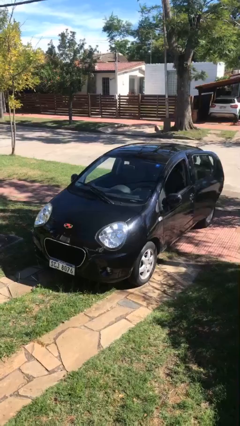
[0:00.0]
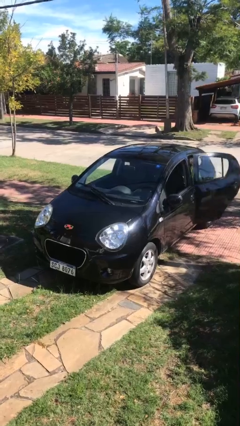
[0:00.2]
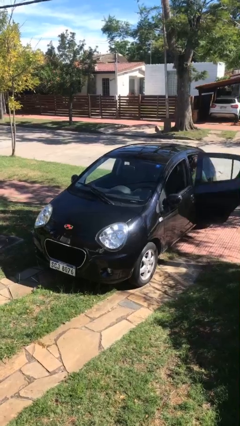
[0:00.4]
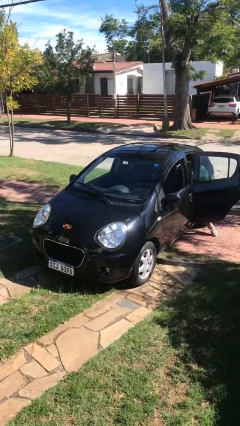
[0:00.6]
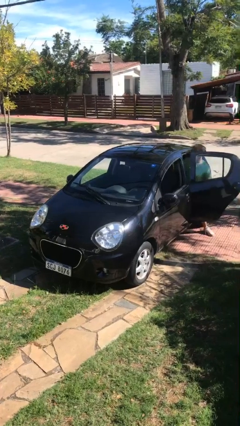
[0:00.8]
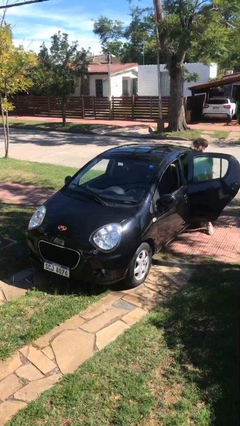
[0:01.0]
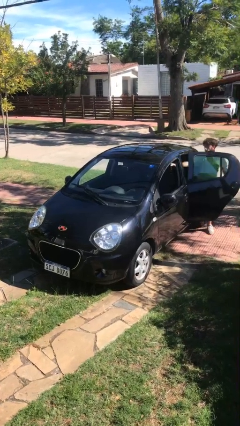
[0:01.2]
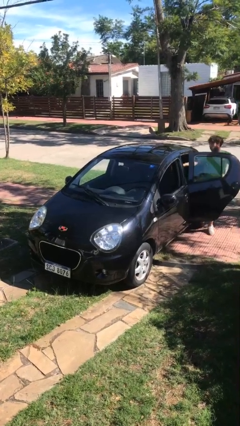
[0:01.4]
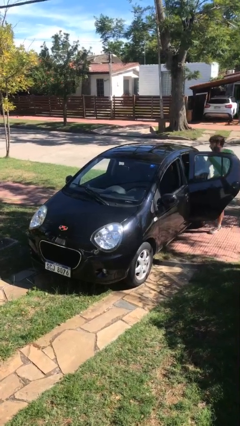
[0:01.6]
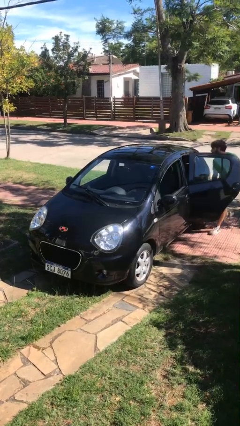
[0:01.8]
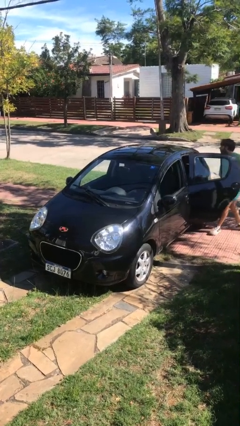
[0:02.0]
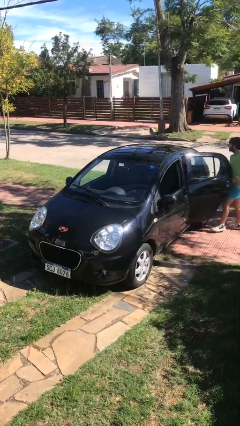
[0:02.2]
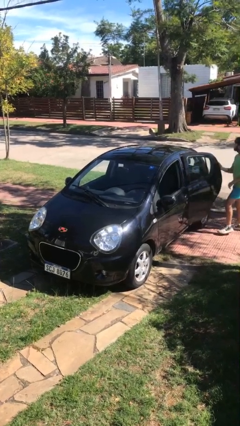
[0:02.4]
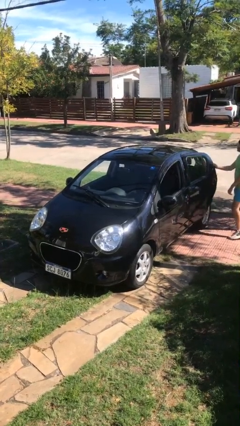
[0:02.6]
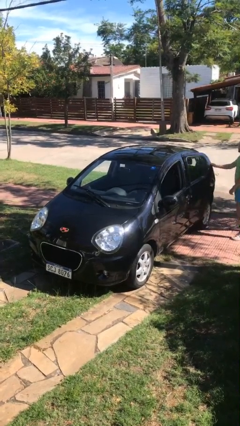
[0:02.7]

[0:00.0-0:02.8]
car drops off person

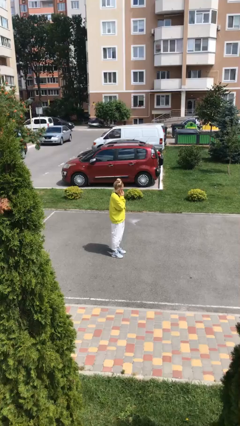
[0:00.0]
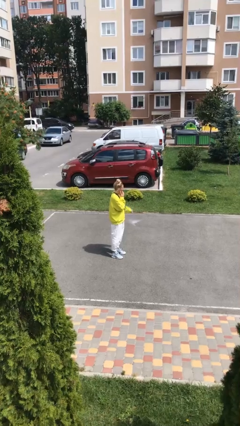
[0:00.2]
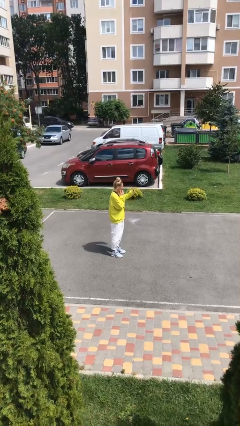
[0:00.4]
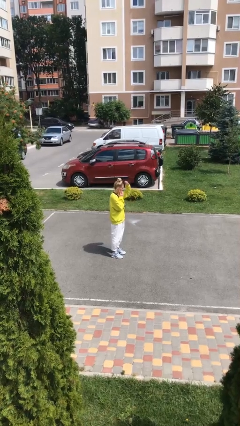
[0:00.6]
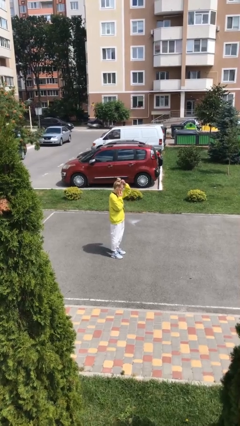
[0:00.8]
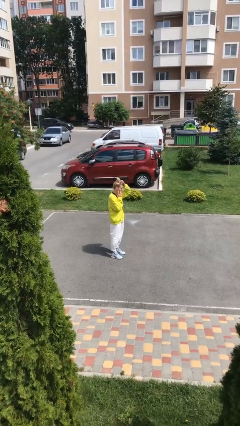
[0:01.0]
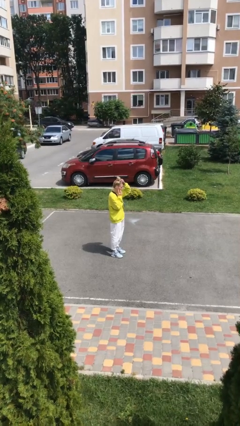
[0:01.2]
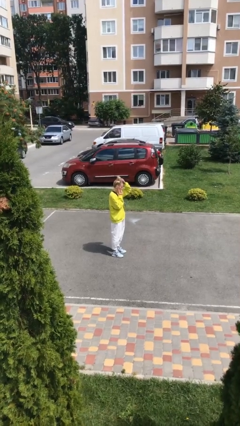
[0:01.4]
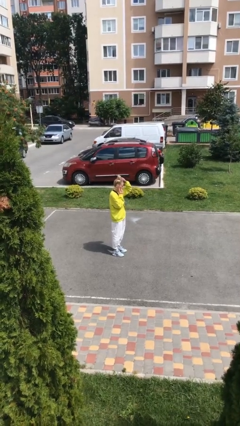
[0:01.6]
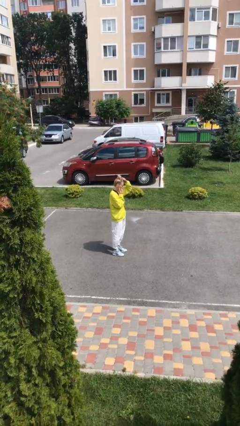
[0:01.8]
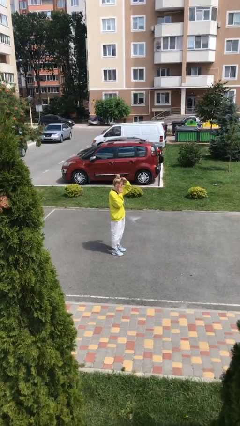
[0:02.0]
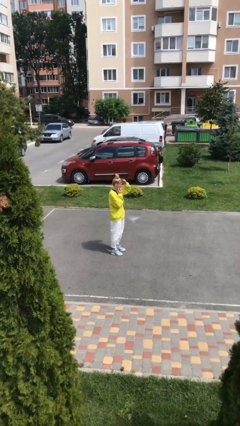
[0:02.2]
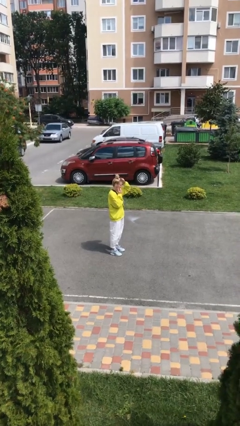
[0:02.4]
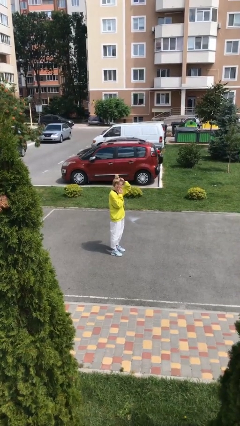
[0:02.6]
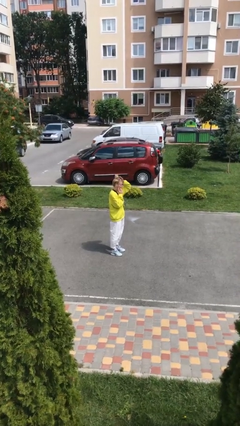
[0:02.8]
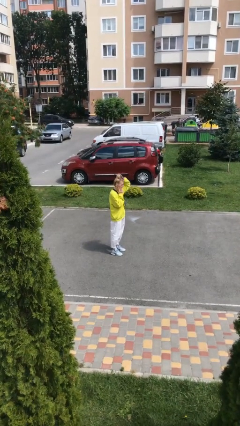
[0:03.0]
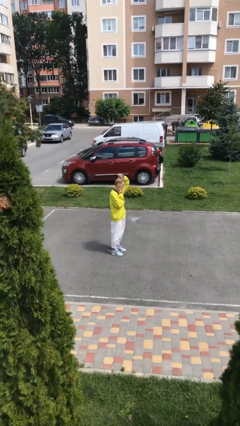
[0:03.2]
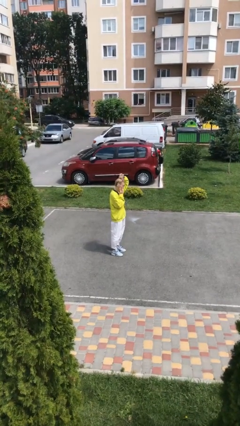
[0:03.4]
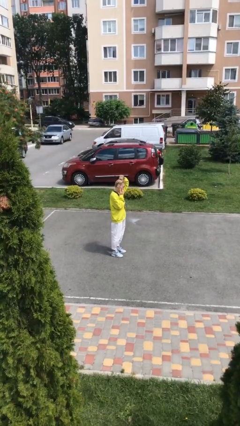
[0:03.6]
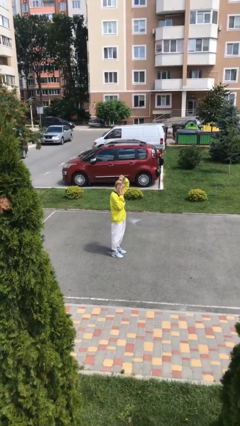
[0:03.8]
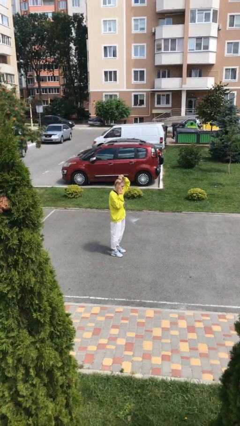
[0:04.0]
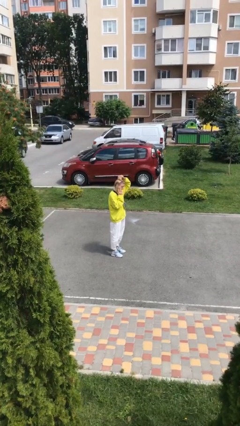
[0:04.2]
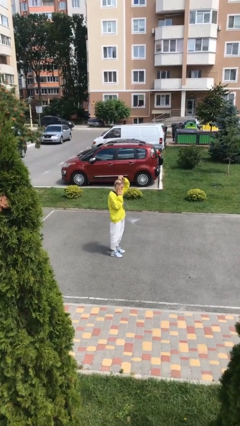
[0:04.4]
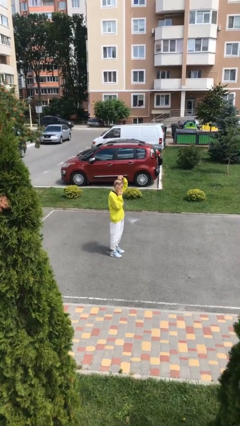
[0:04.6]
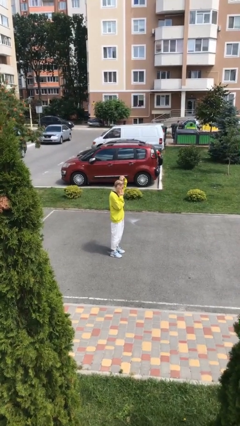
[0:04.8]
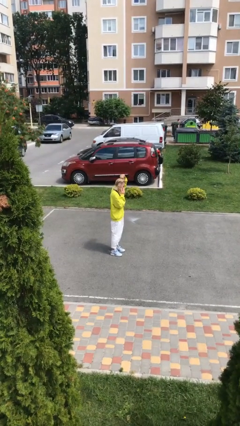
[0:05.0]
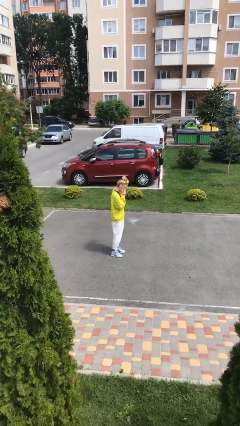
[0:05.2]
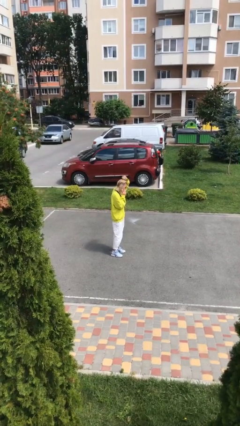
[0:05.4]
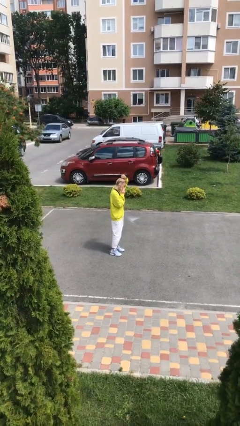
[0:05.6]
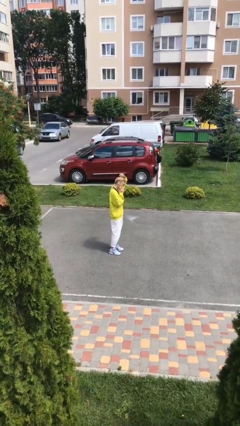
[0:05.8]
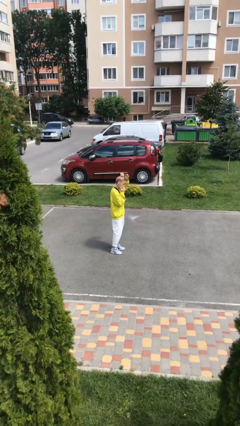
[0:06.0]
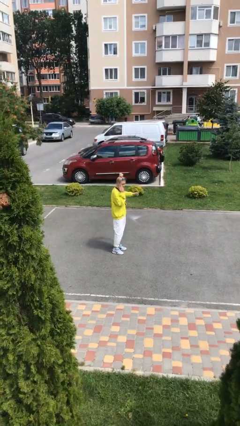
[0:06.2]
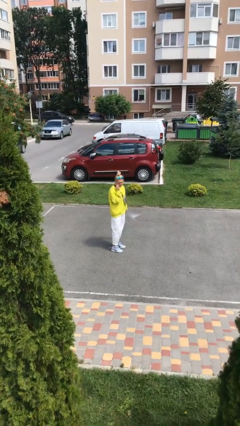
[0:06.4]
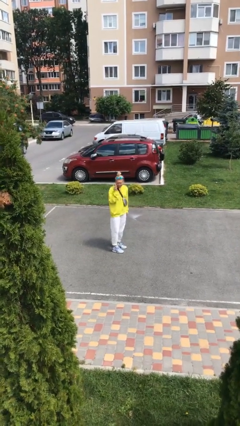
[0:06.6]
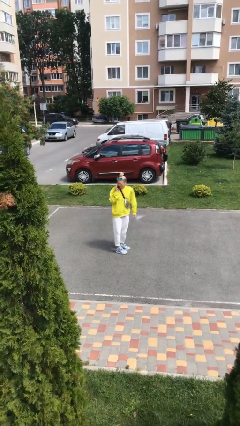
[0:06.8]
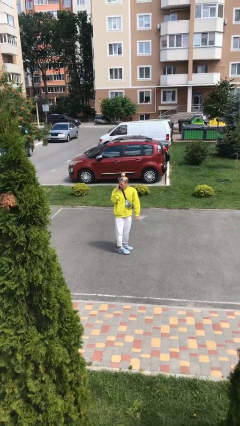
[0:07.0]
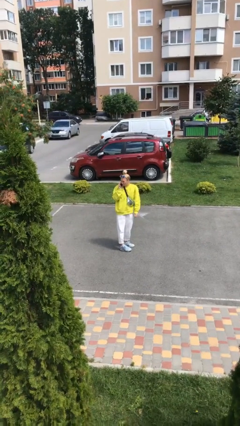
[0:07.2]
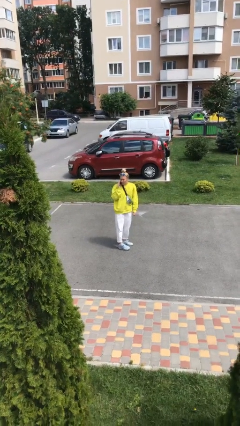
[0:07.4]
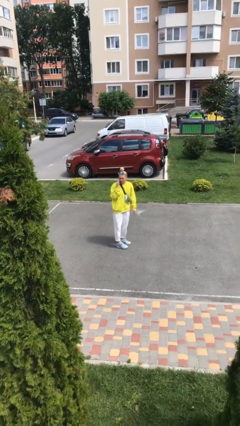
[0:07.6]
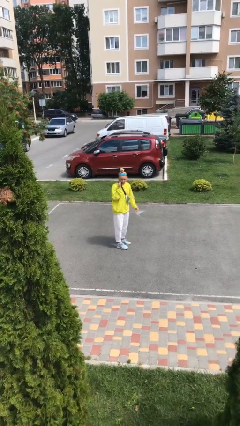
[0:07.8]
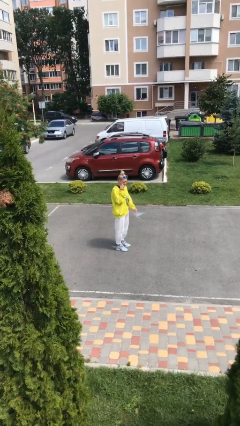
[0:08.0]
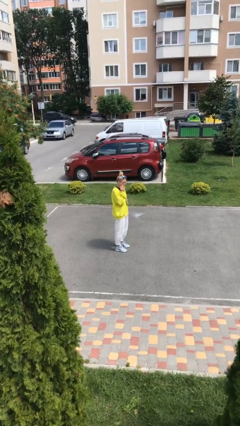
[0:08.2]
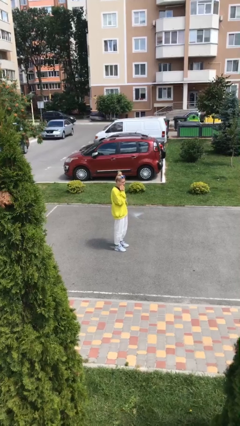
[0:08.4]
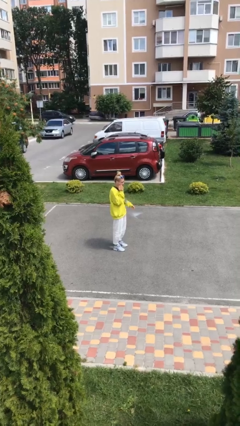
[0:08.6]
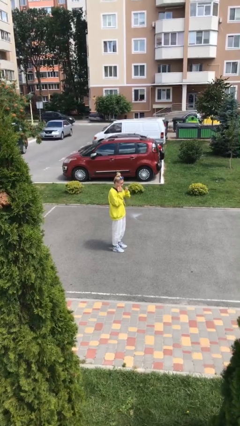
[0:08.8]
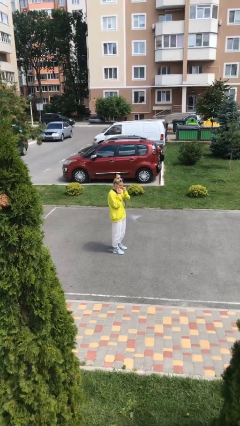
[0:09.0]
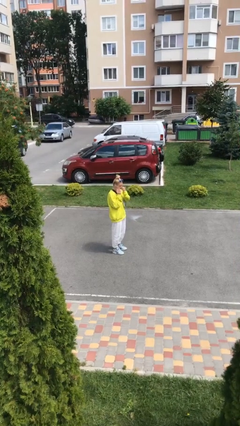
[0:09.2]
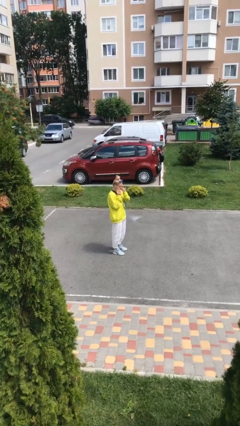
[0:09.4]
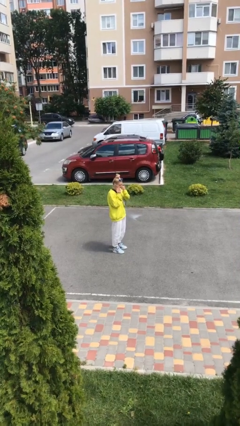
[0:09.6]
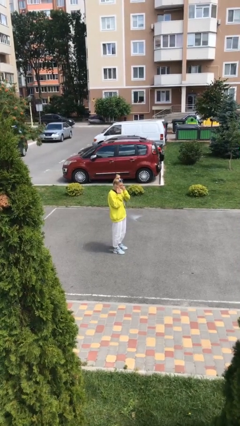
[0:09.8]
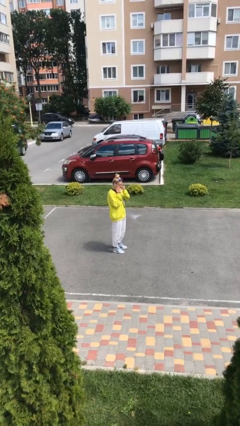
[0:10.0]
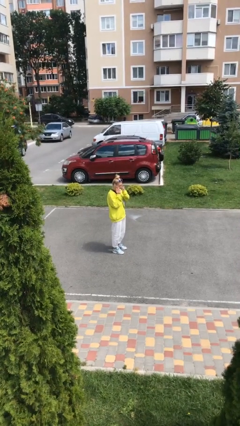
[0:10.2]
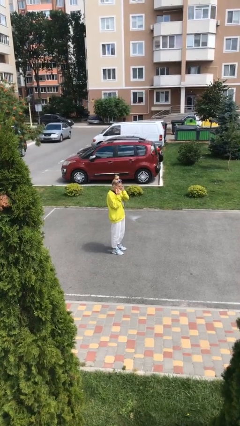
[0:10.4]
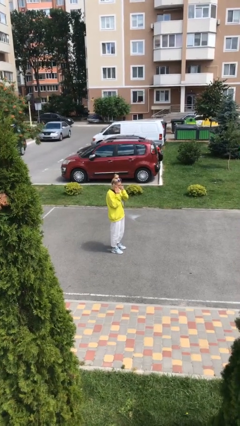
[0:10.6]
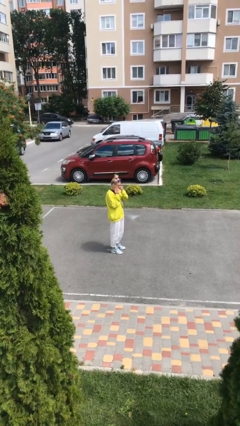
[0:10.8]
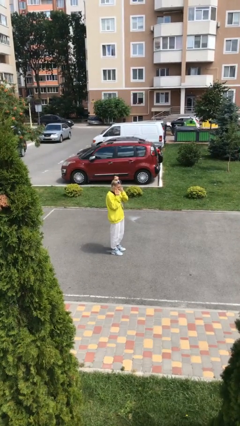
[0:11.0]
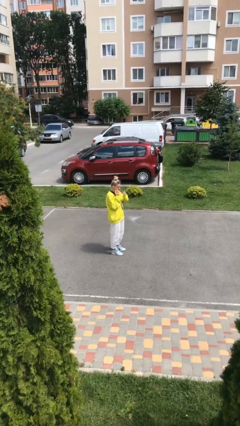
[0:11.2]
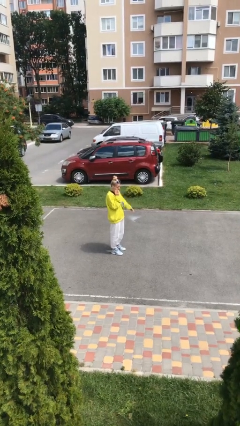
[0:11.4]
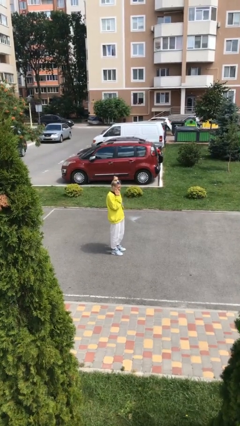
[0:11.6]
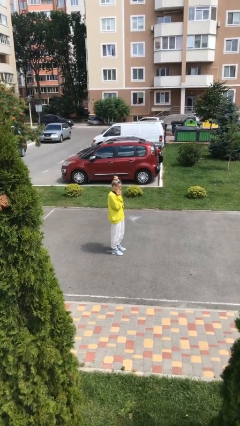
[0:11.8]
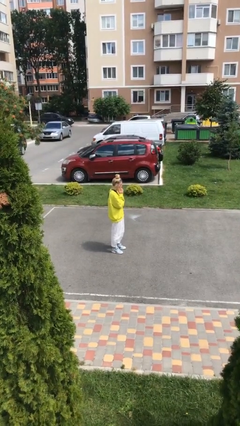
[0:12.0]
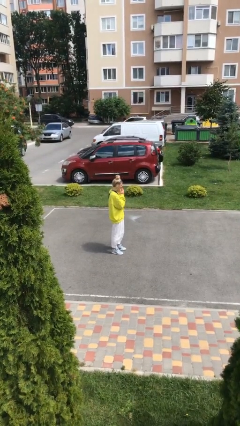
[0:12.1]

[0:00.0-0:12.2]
person talks on phone

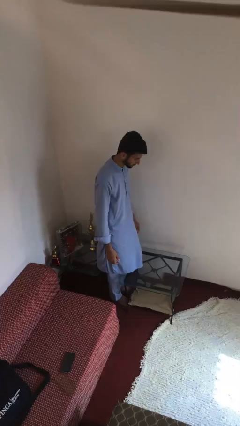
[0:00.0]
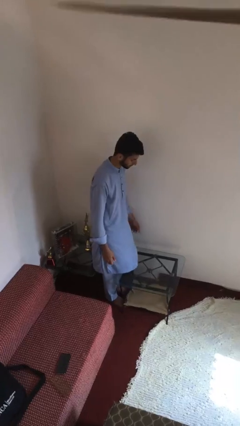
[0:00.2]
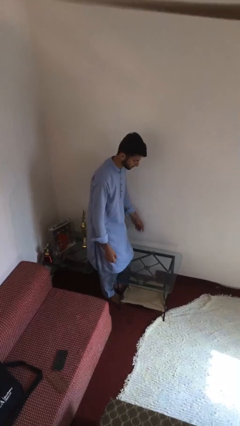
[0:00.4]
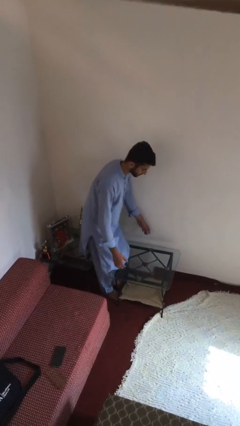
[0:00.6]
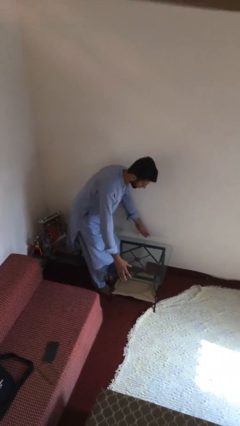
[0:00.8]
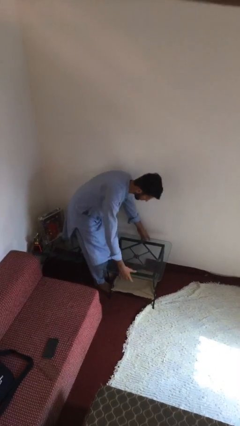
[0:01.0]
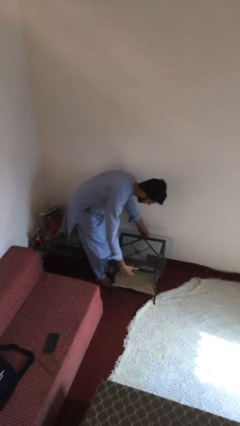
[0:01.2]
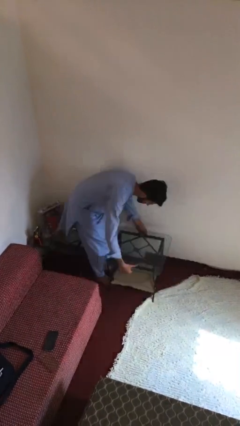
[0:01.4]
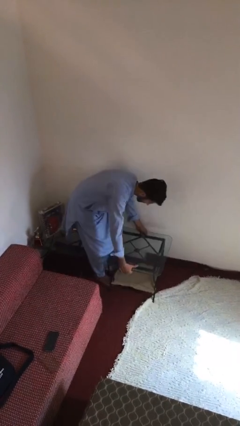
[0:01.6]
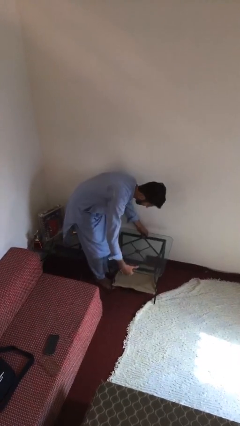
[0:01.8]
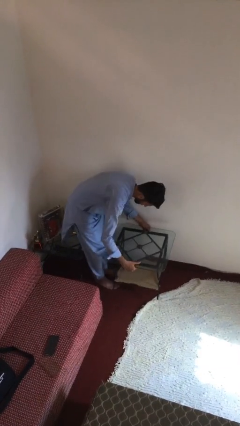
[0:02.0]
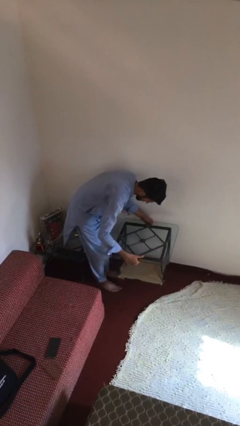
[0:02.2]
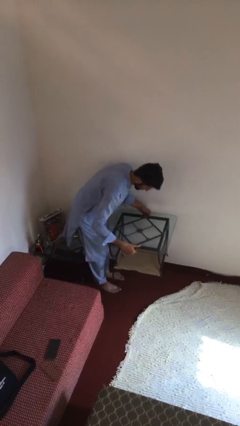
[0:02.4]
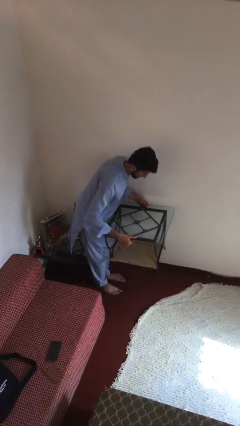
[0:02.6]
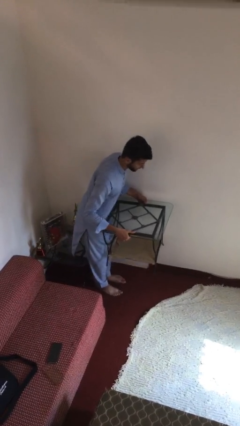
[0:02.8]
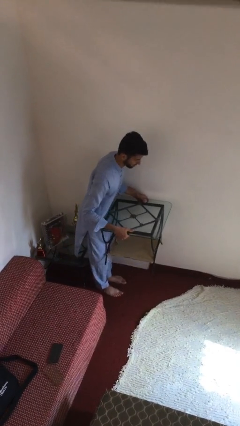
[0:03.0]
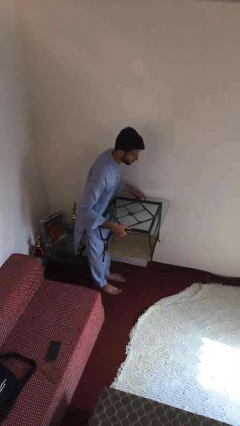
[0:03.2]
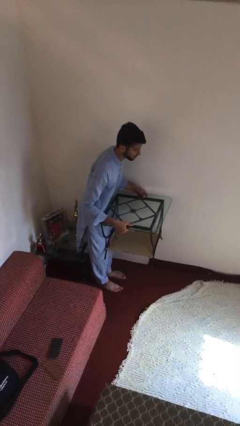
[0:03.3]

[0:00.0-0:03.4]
person picks up object from floor
